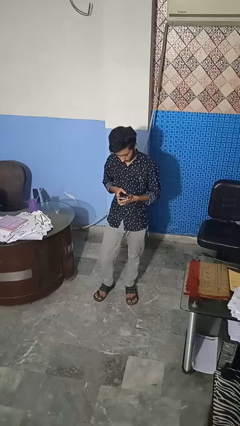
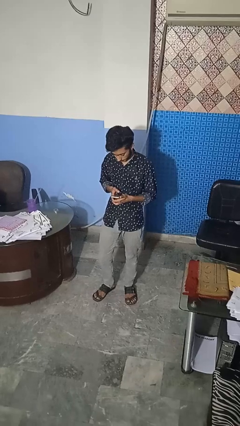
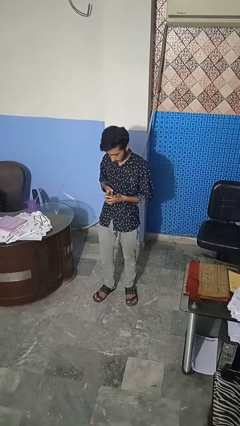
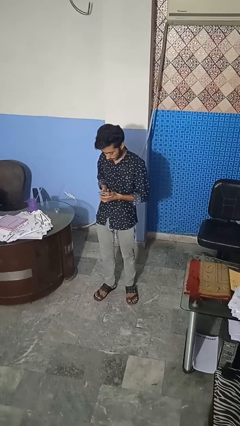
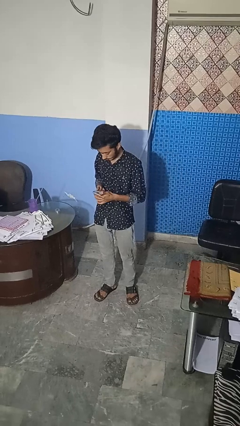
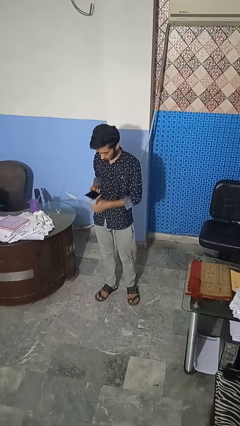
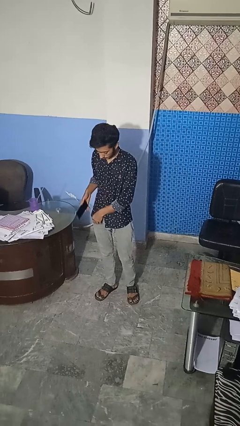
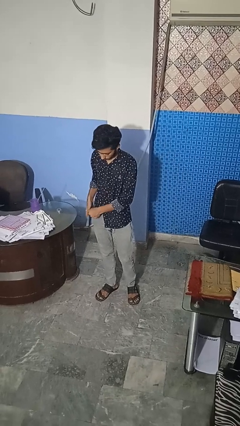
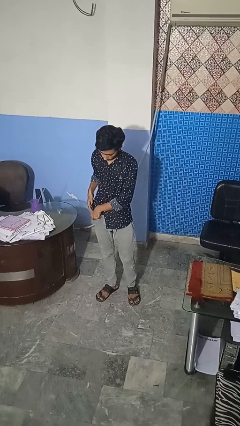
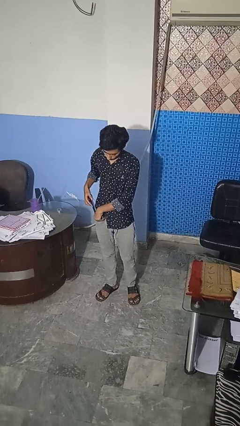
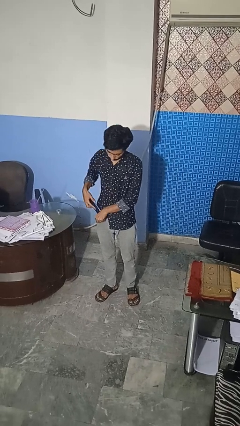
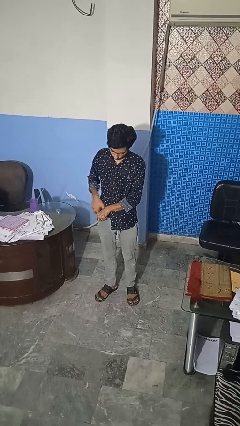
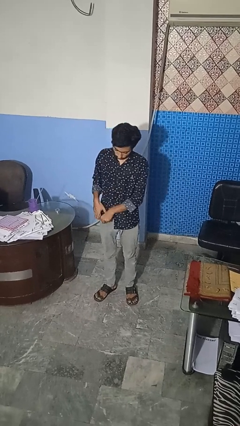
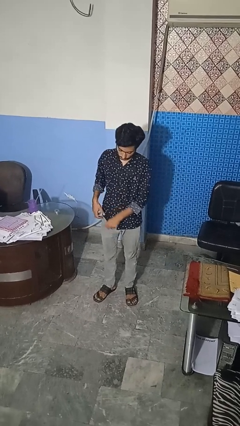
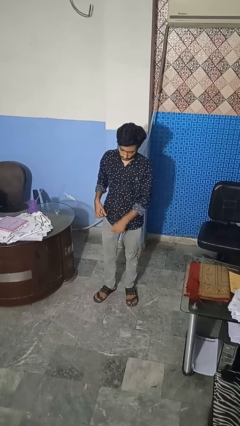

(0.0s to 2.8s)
person puts phone into pocket

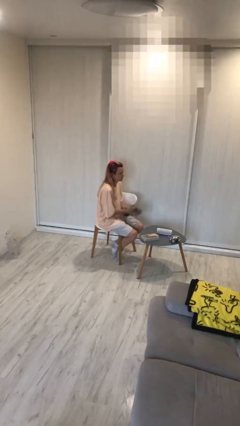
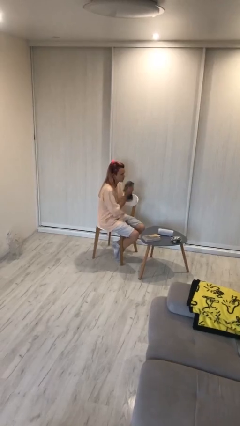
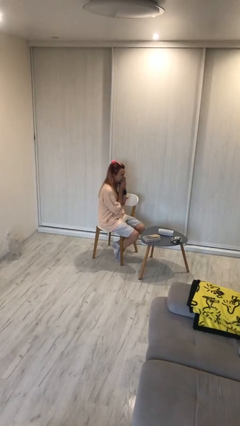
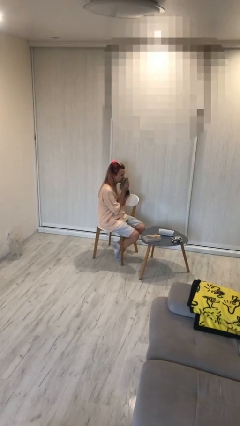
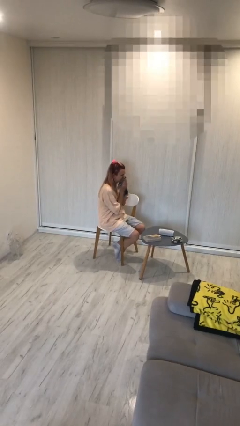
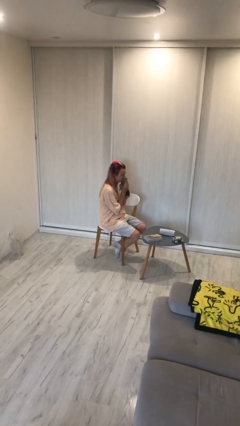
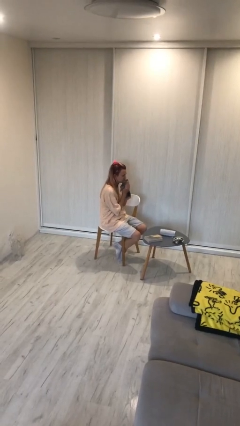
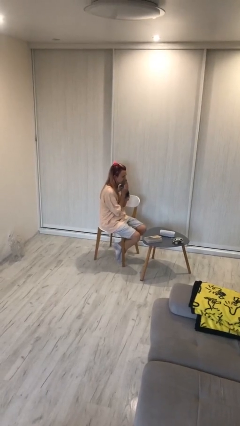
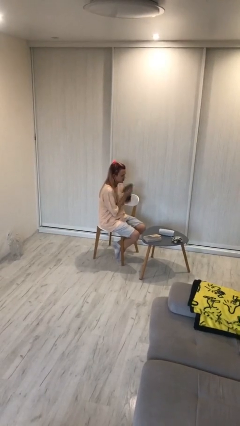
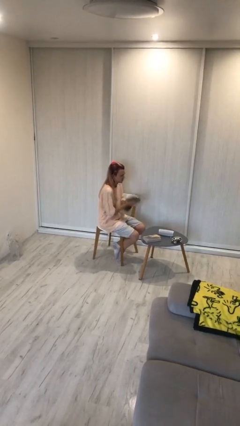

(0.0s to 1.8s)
person wipes mouth with napkin

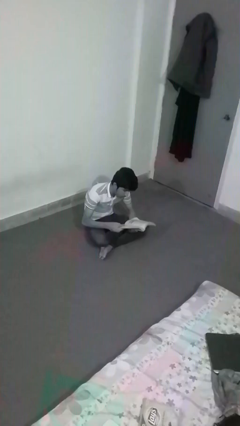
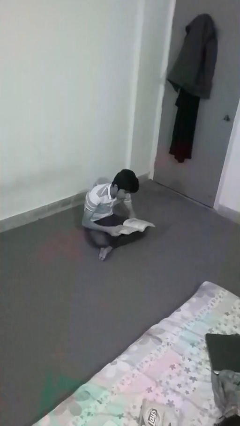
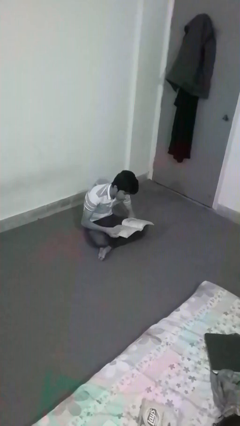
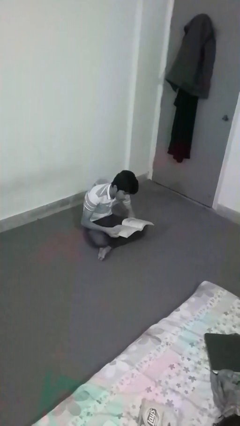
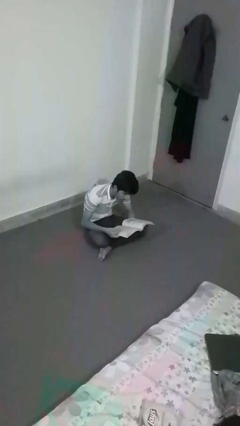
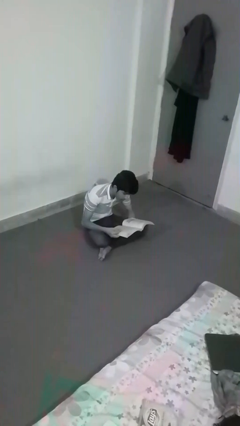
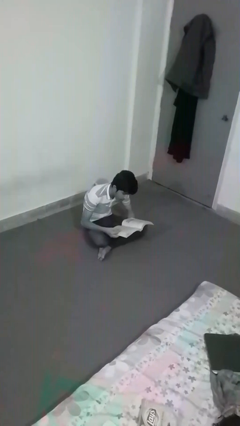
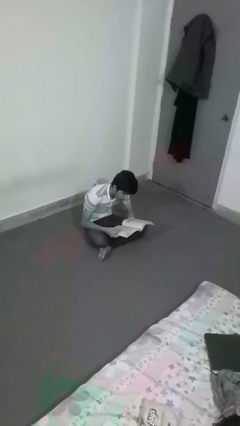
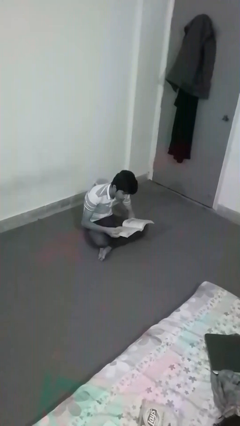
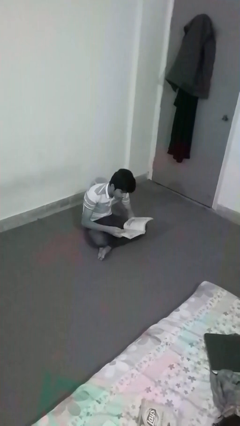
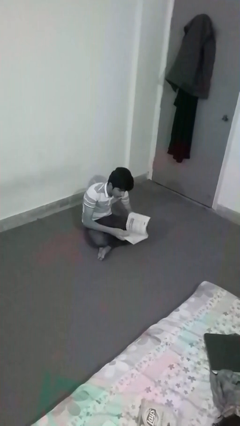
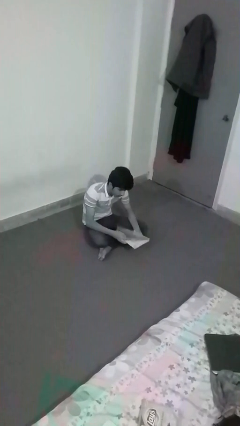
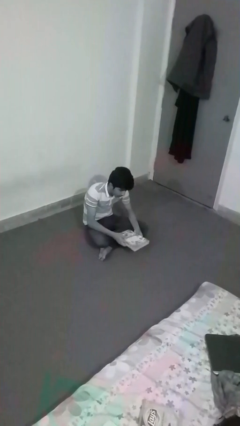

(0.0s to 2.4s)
person reads document

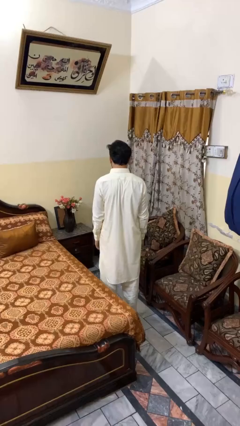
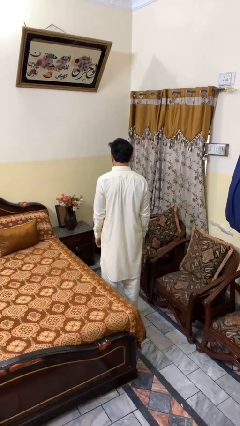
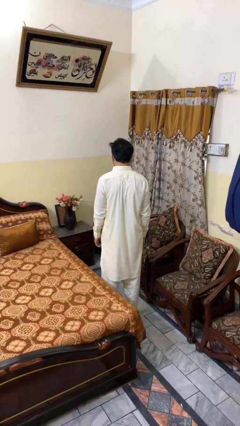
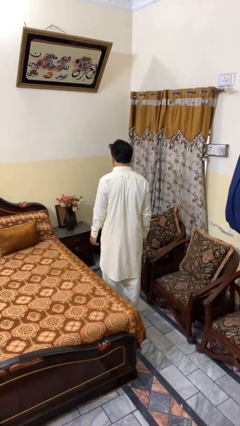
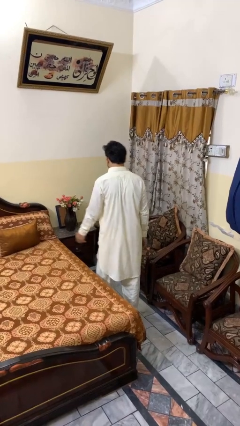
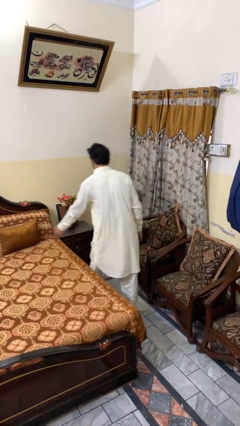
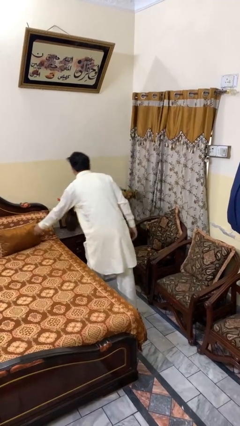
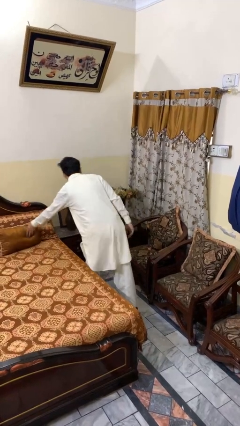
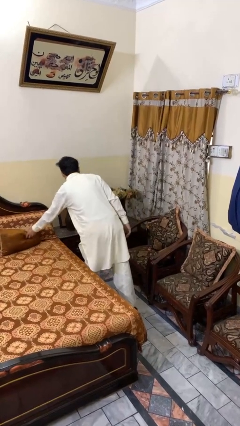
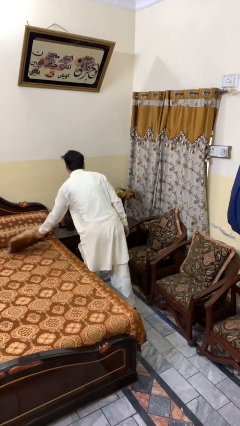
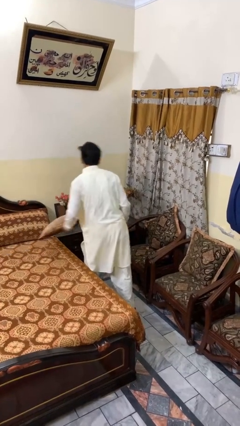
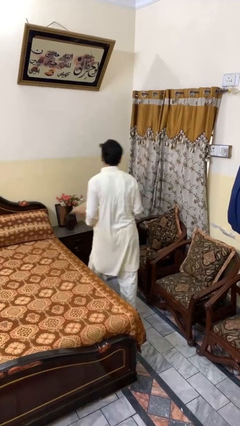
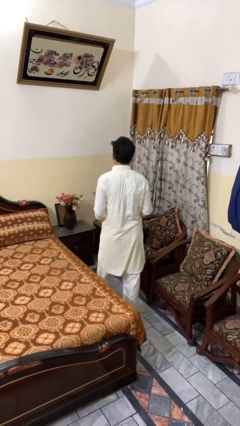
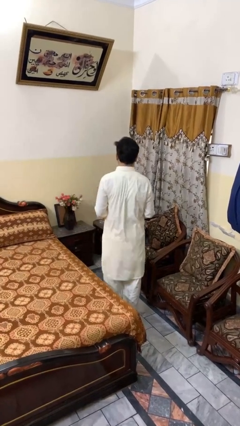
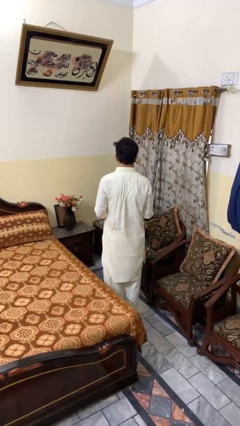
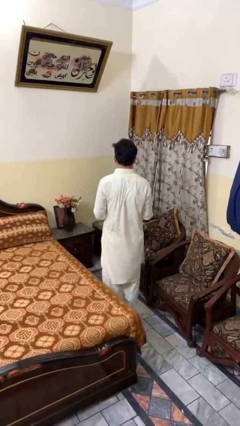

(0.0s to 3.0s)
person picks up object from bed

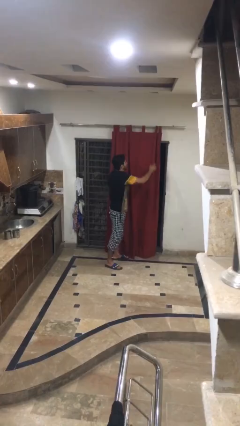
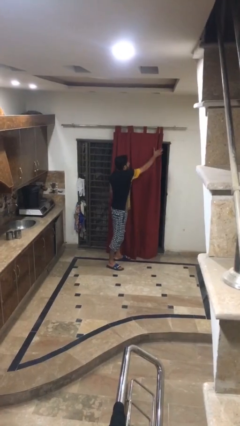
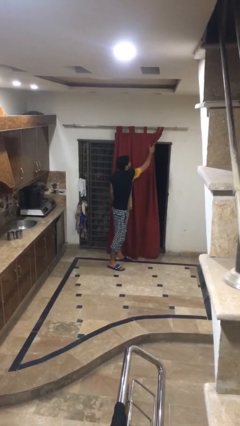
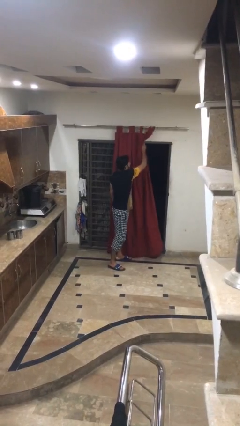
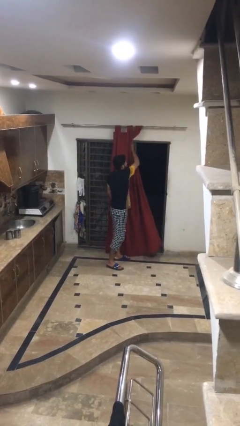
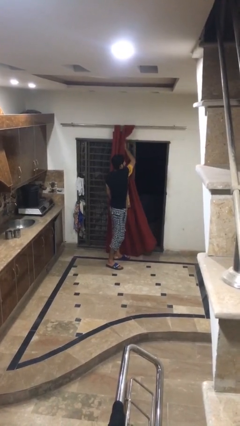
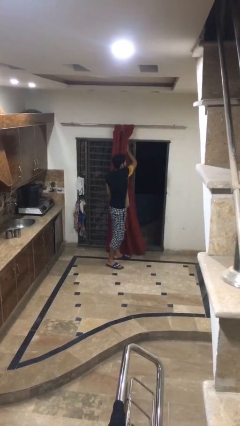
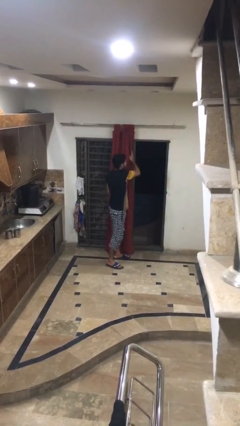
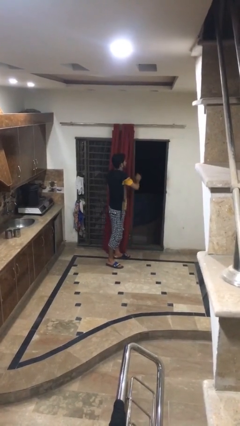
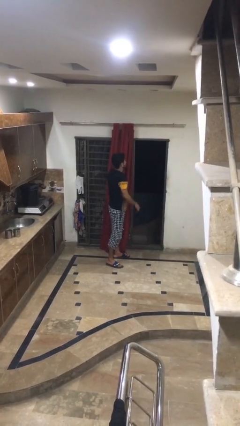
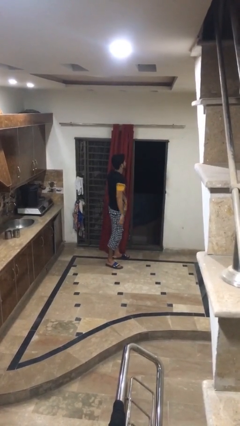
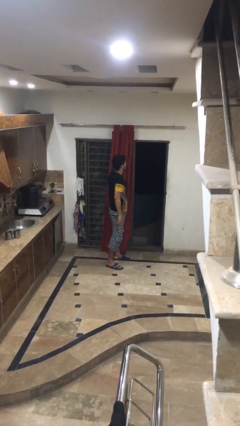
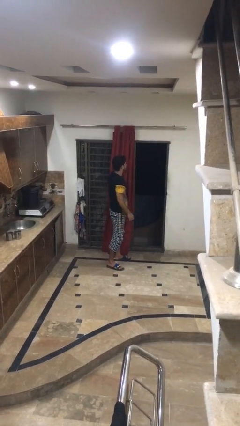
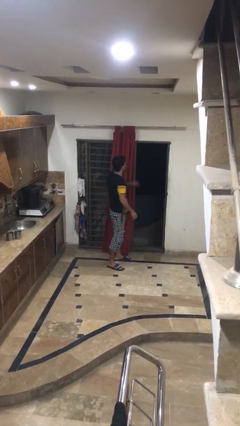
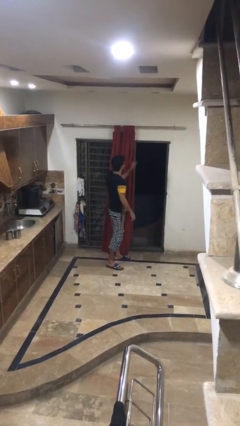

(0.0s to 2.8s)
person opens curtains

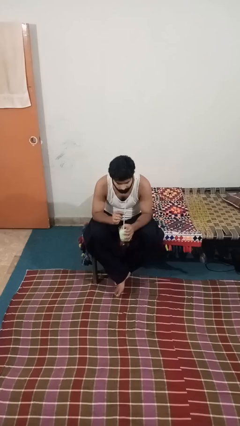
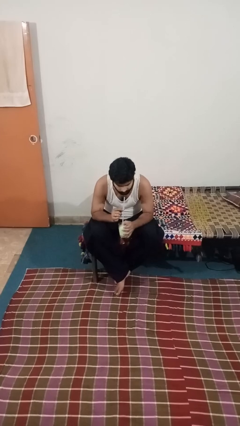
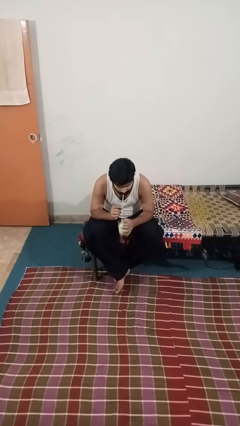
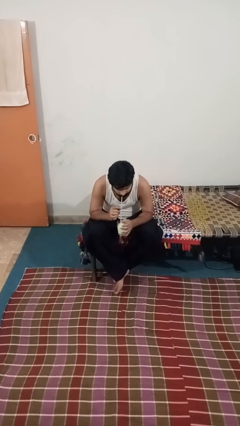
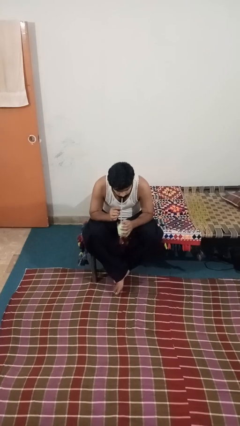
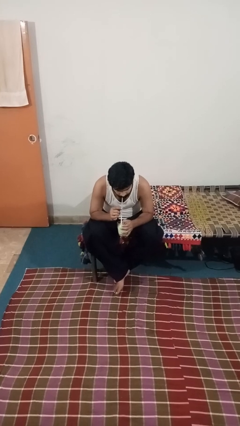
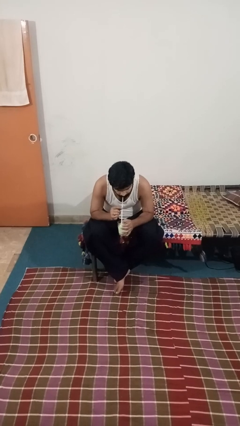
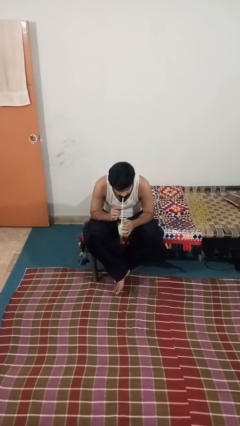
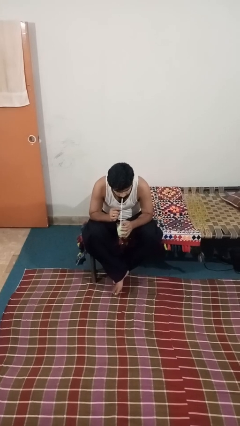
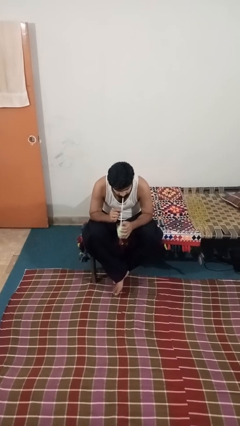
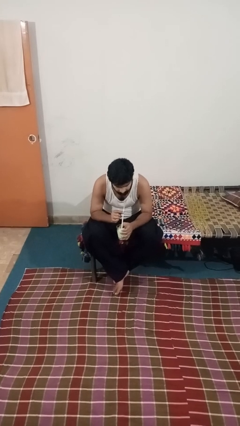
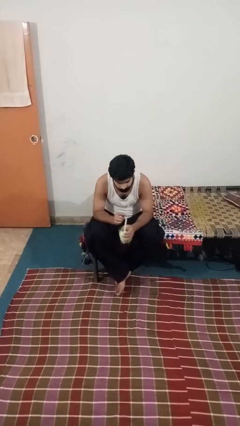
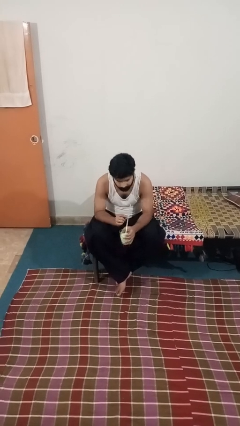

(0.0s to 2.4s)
person drinks from straw

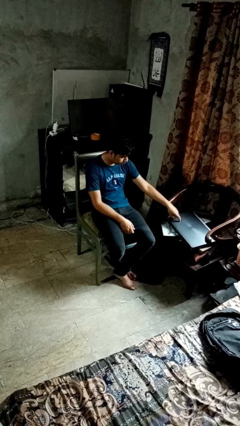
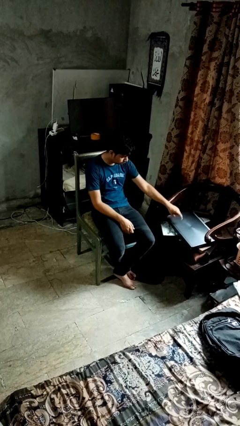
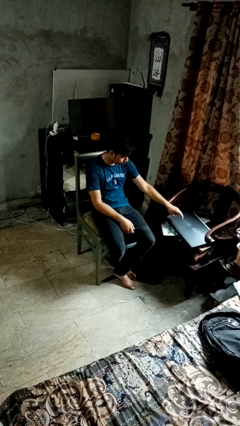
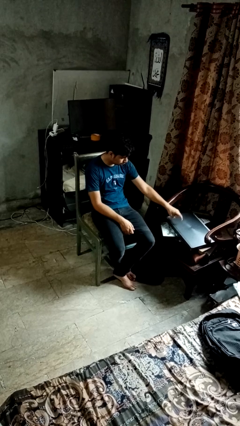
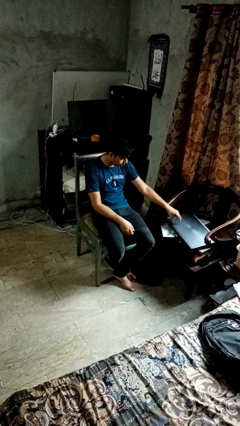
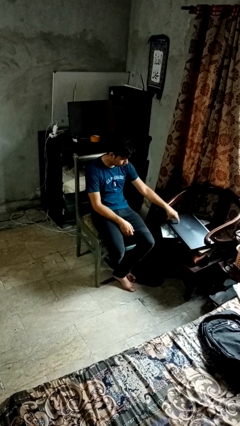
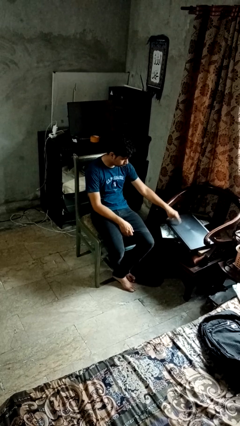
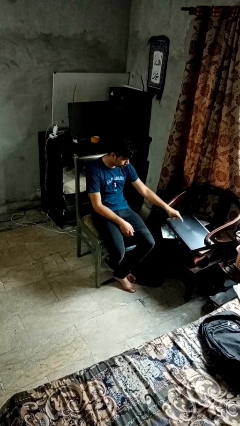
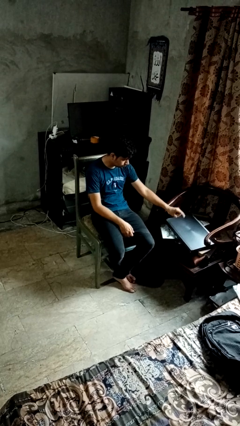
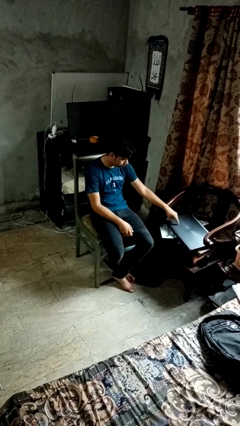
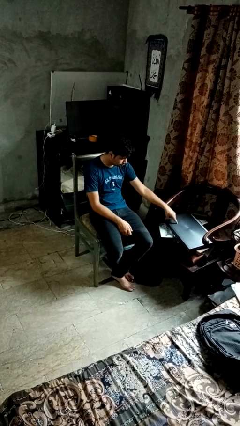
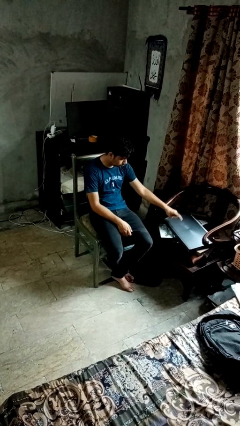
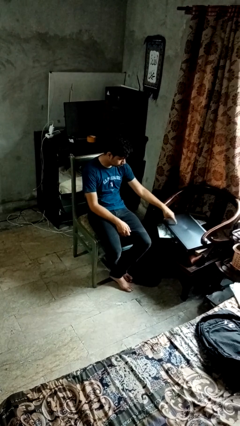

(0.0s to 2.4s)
person taps object with finger
